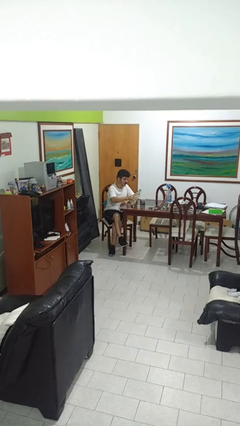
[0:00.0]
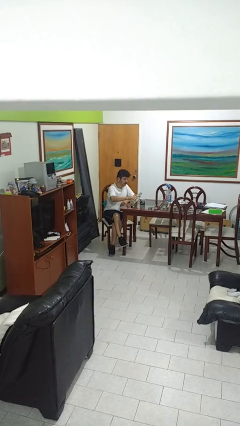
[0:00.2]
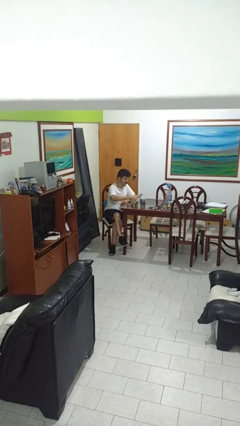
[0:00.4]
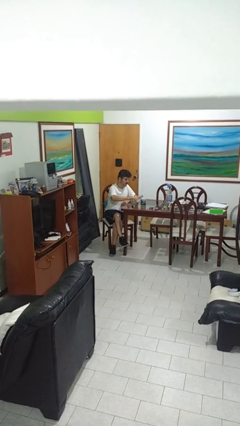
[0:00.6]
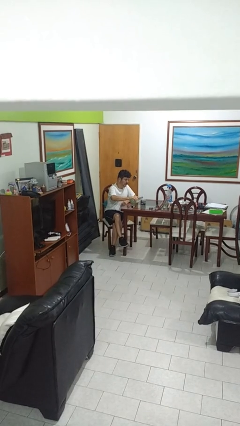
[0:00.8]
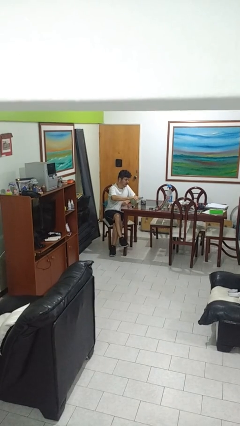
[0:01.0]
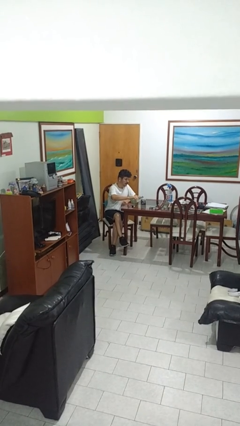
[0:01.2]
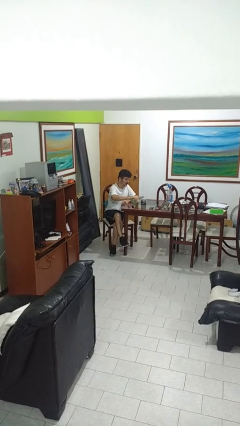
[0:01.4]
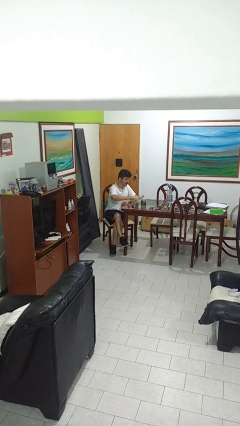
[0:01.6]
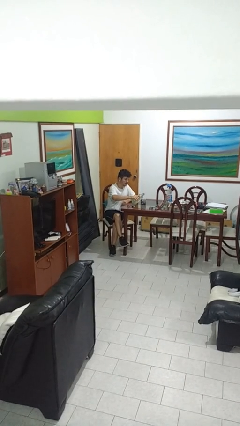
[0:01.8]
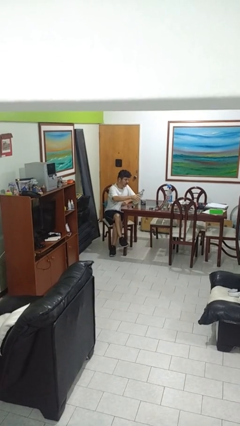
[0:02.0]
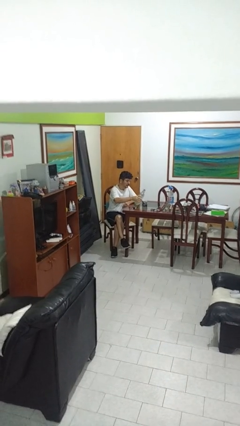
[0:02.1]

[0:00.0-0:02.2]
person pours liquid into cup

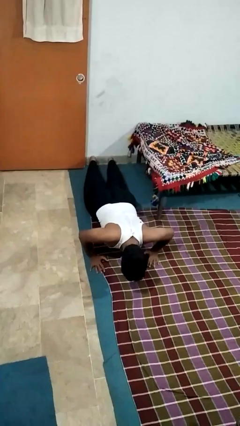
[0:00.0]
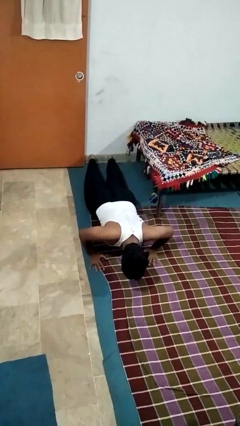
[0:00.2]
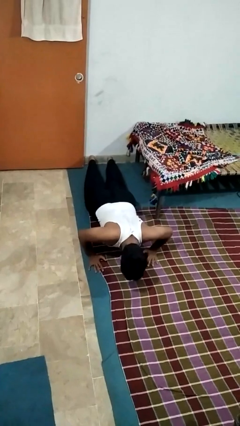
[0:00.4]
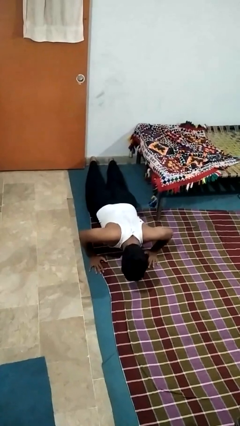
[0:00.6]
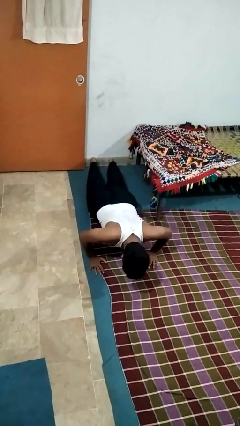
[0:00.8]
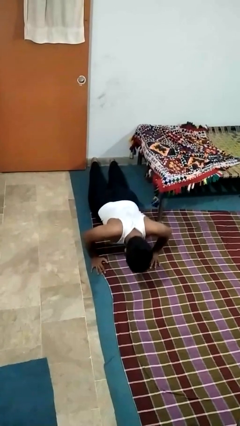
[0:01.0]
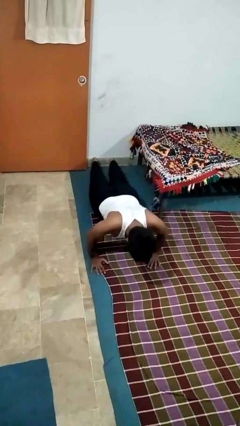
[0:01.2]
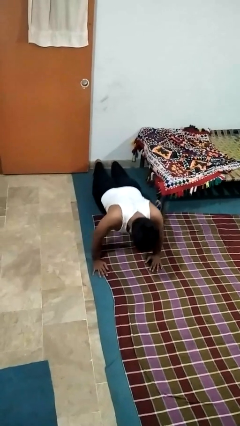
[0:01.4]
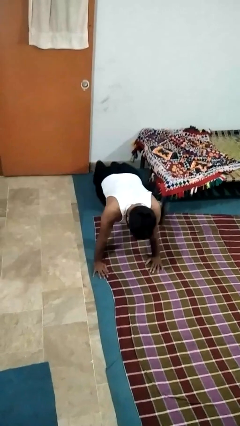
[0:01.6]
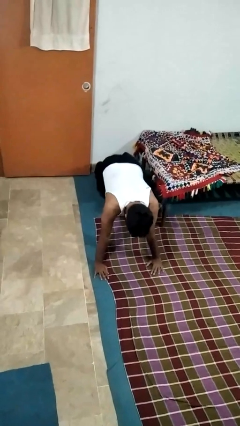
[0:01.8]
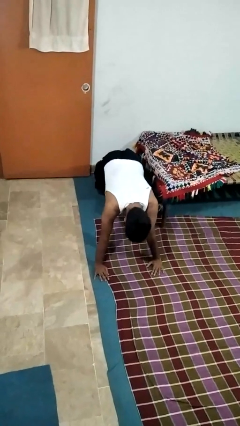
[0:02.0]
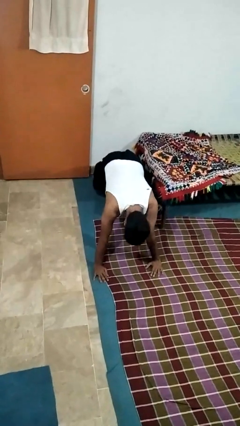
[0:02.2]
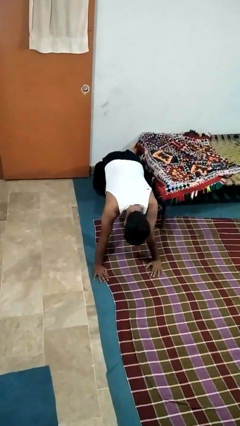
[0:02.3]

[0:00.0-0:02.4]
person exercises with pushup

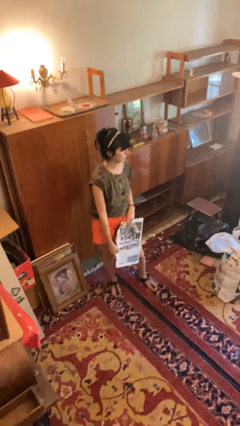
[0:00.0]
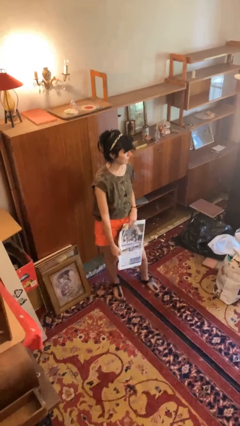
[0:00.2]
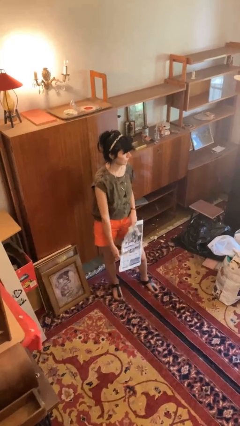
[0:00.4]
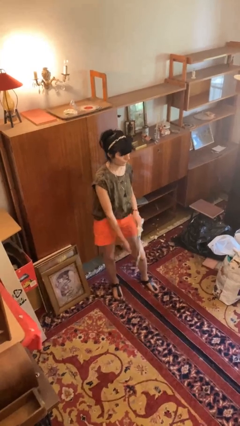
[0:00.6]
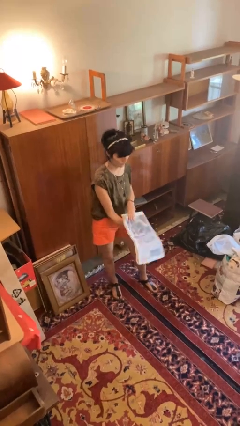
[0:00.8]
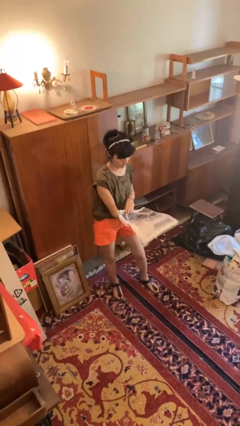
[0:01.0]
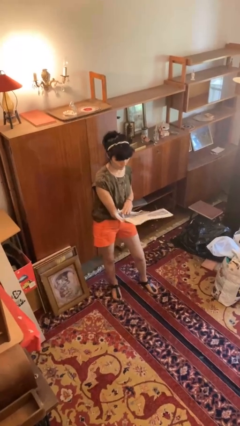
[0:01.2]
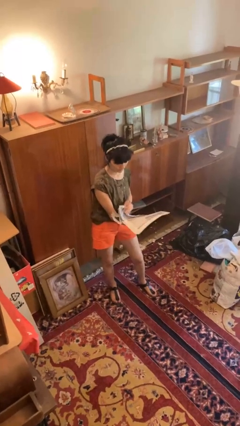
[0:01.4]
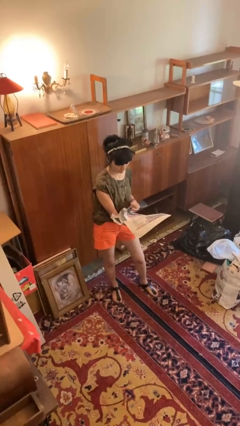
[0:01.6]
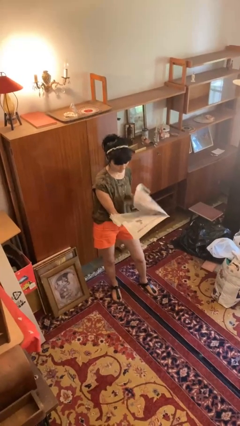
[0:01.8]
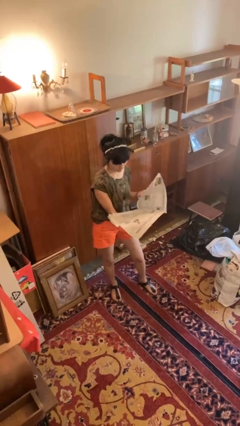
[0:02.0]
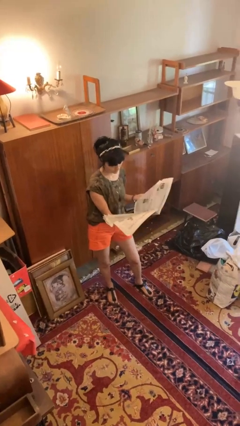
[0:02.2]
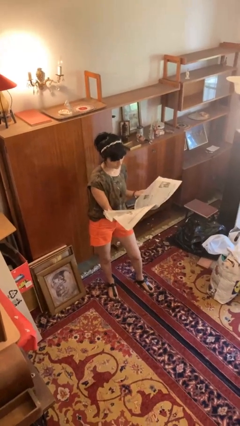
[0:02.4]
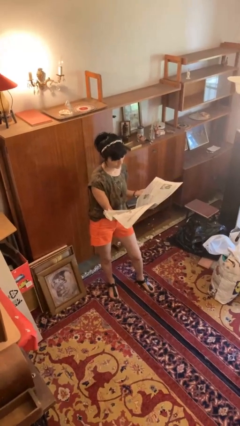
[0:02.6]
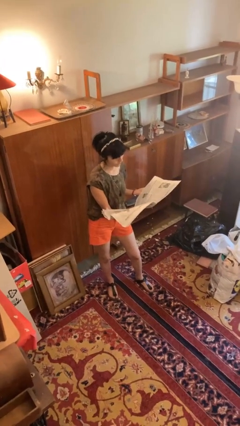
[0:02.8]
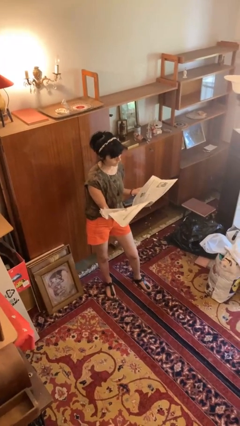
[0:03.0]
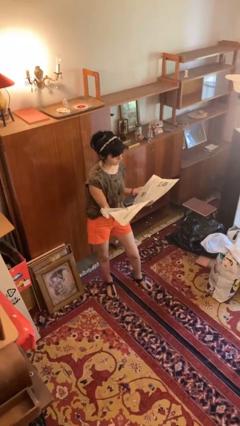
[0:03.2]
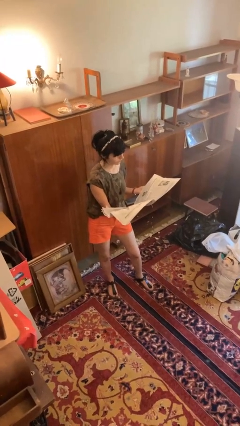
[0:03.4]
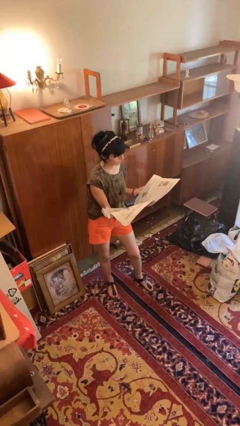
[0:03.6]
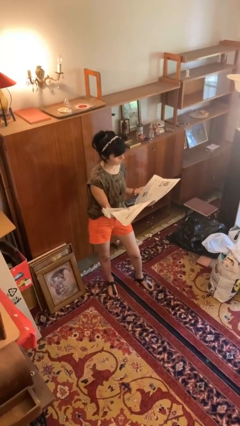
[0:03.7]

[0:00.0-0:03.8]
person reads newspaper

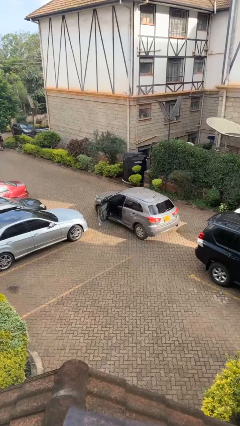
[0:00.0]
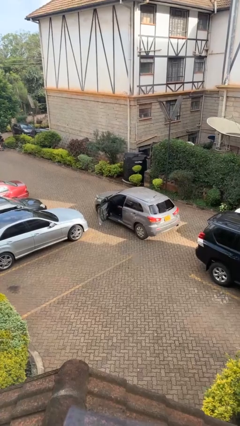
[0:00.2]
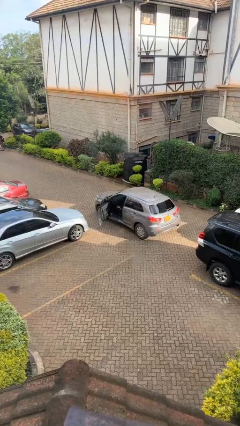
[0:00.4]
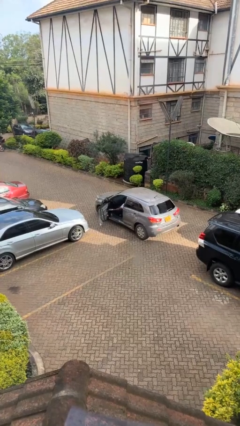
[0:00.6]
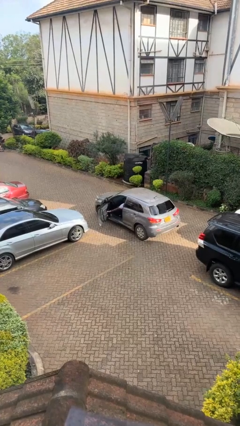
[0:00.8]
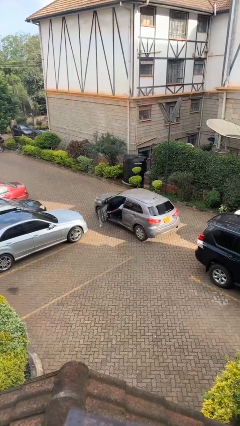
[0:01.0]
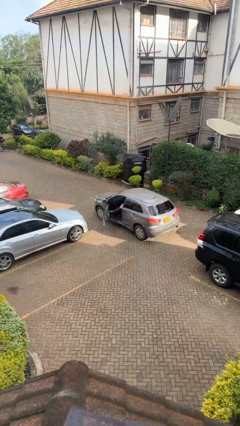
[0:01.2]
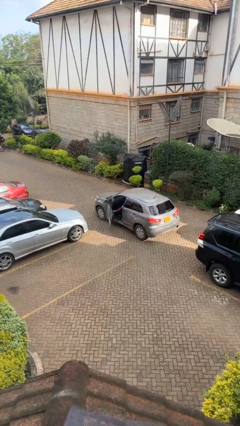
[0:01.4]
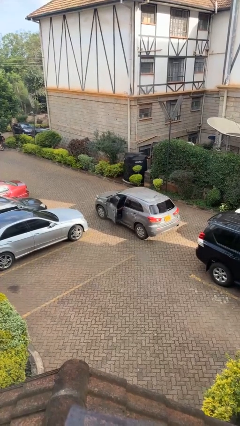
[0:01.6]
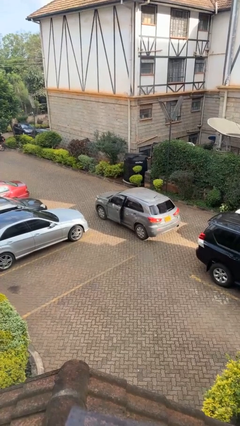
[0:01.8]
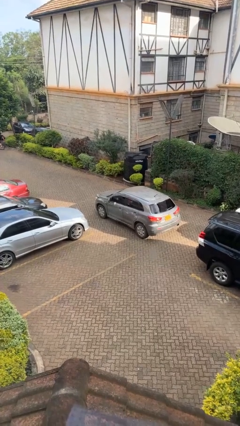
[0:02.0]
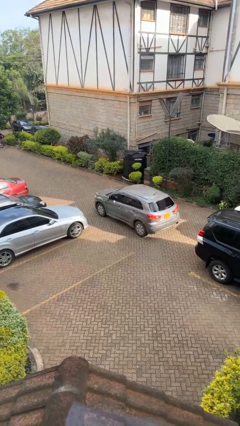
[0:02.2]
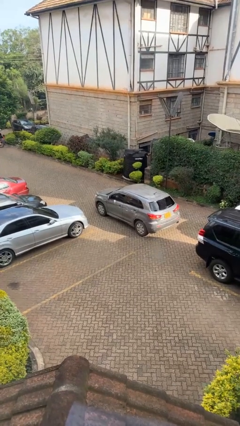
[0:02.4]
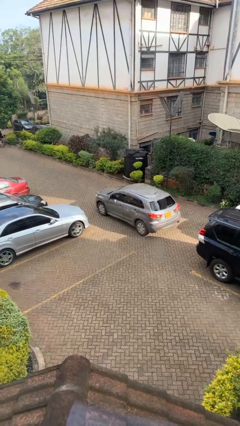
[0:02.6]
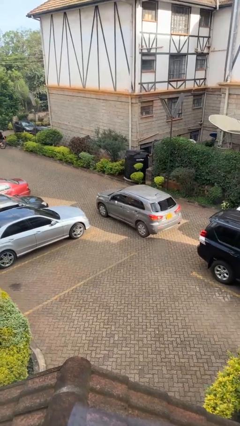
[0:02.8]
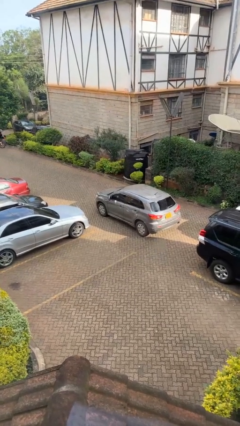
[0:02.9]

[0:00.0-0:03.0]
person closes car door

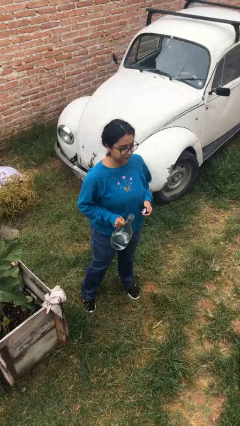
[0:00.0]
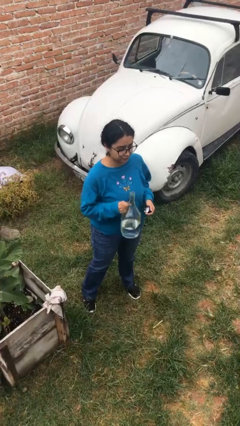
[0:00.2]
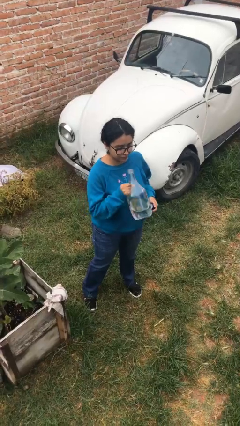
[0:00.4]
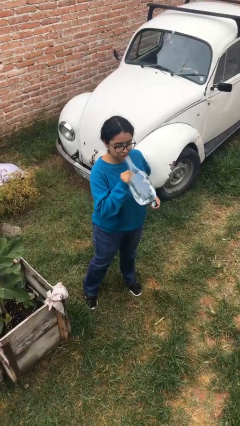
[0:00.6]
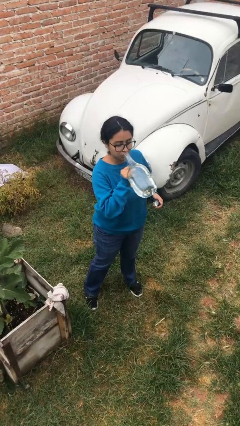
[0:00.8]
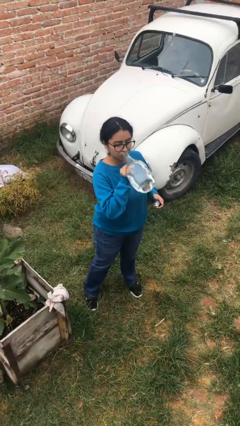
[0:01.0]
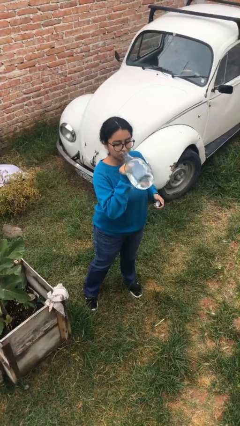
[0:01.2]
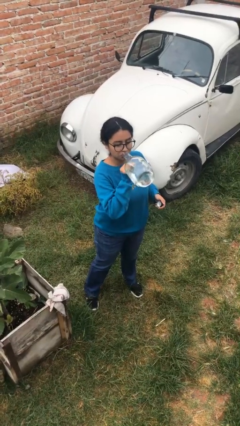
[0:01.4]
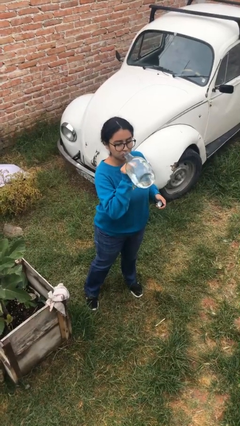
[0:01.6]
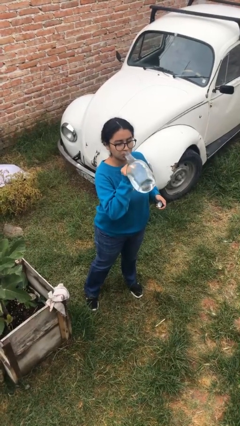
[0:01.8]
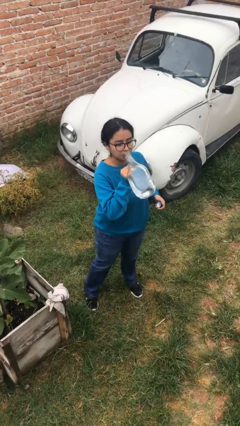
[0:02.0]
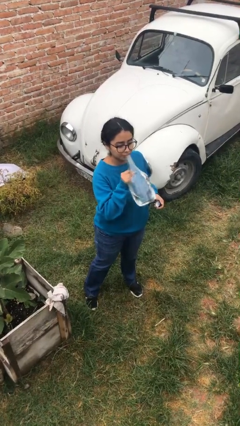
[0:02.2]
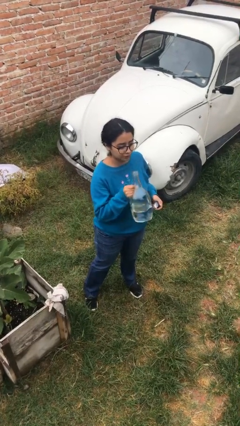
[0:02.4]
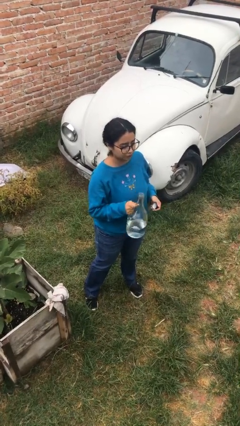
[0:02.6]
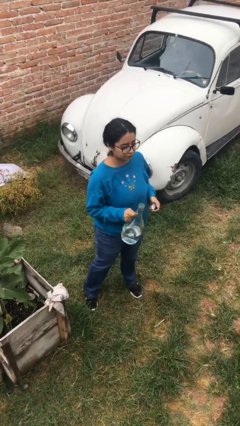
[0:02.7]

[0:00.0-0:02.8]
person drinks from bottle

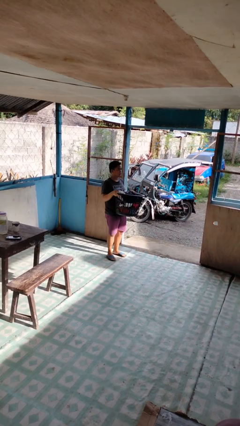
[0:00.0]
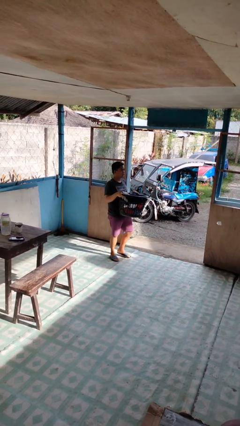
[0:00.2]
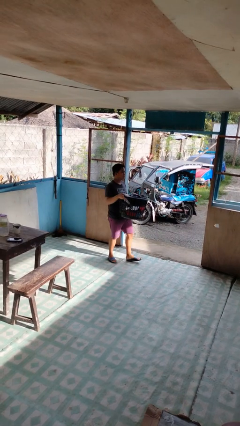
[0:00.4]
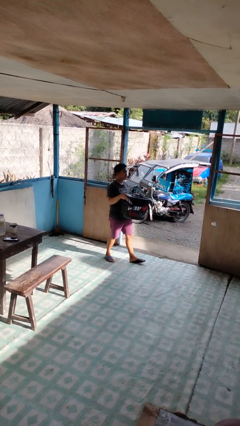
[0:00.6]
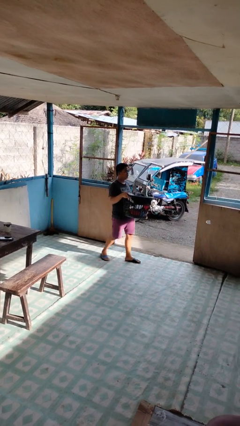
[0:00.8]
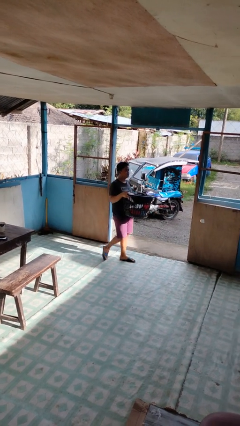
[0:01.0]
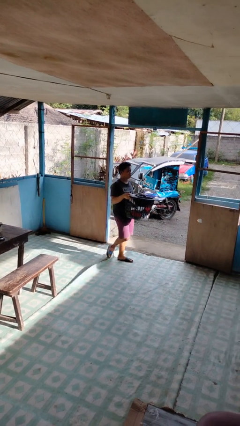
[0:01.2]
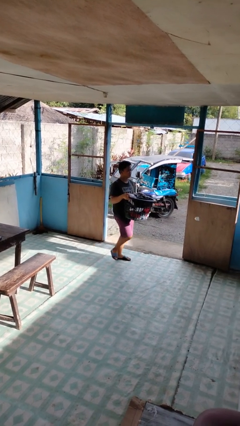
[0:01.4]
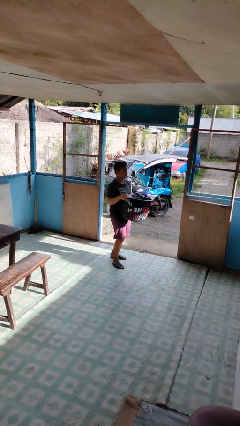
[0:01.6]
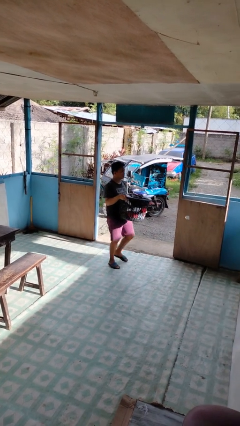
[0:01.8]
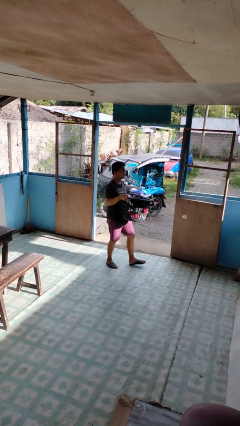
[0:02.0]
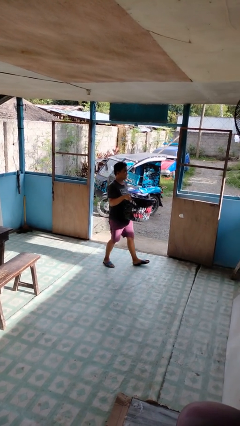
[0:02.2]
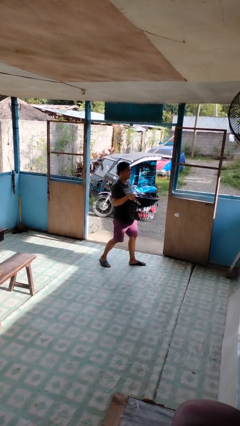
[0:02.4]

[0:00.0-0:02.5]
person carries laundry basket

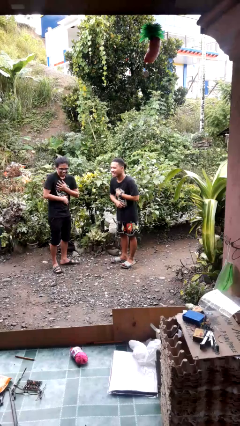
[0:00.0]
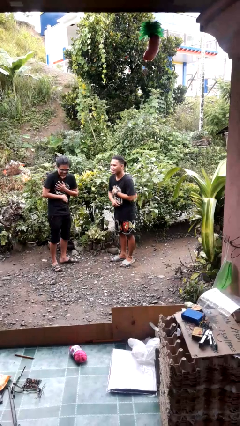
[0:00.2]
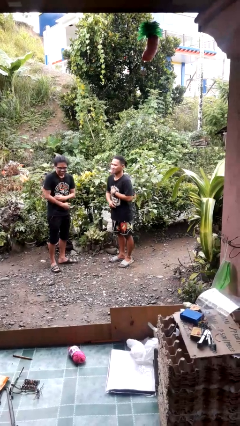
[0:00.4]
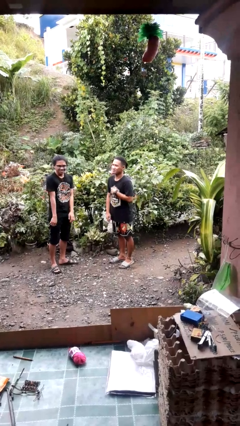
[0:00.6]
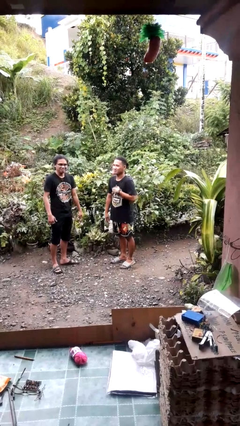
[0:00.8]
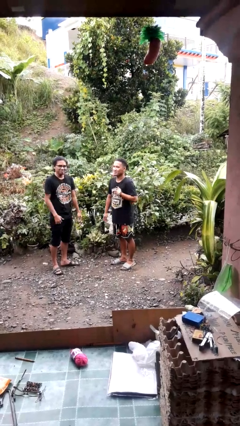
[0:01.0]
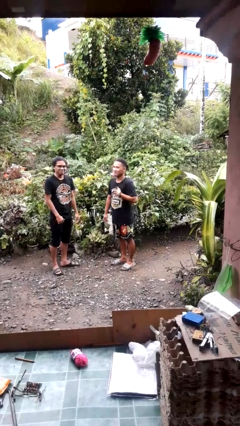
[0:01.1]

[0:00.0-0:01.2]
person laughs with person
